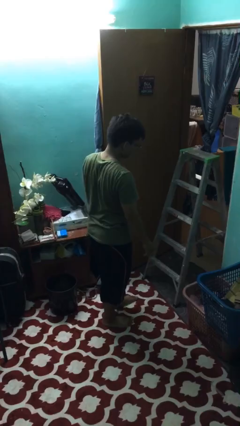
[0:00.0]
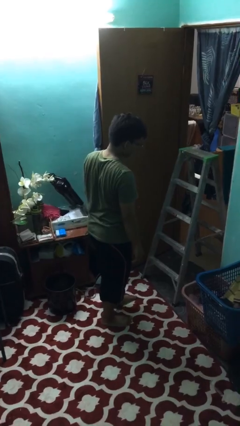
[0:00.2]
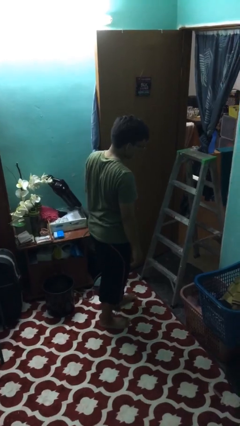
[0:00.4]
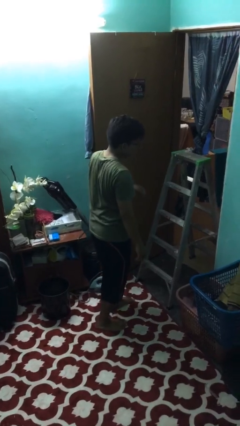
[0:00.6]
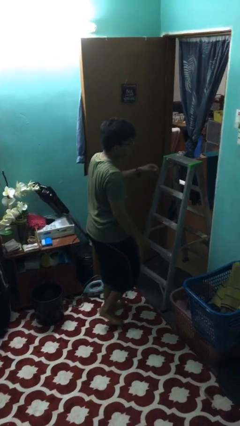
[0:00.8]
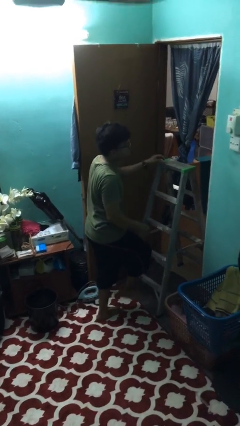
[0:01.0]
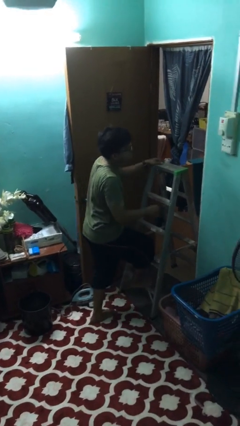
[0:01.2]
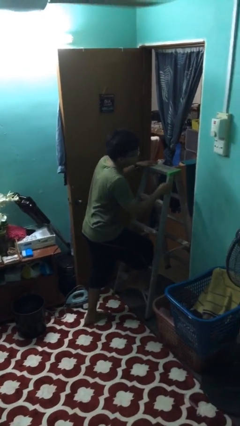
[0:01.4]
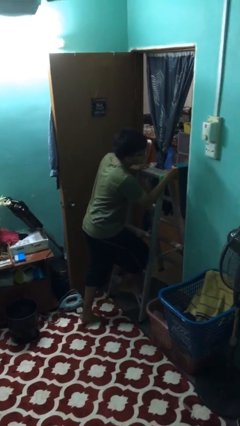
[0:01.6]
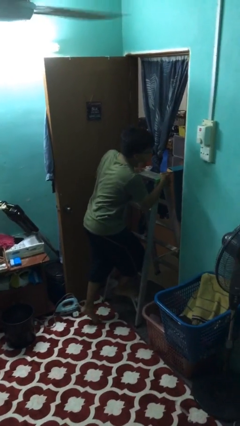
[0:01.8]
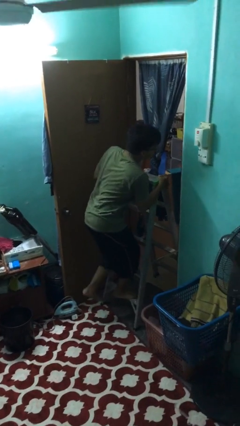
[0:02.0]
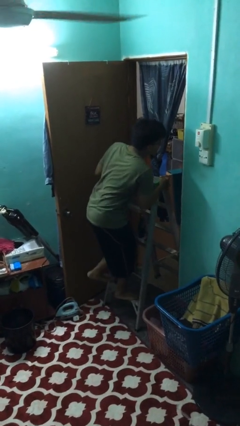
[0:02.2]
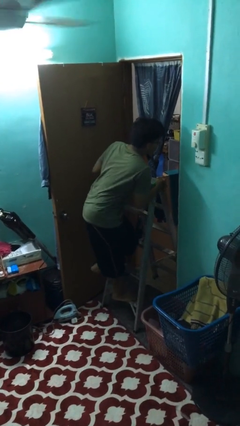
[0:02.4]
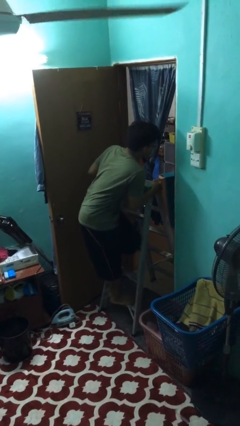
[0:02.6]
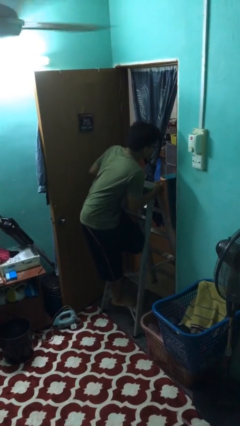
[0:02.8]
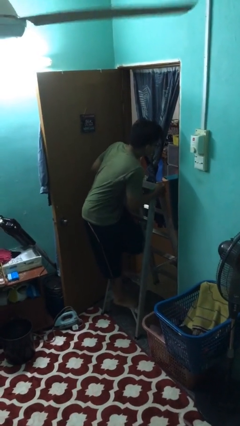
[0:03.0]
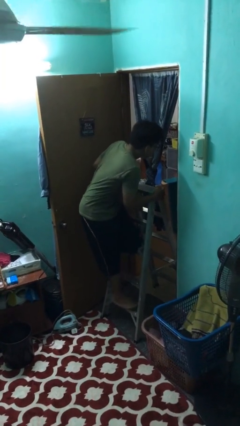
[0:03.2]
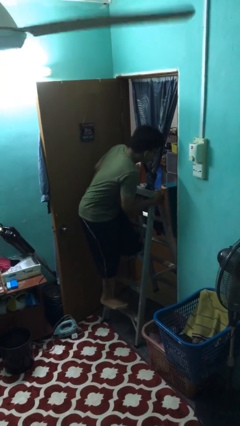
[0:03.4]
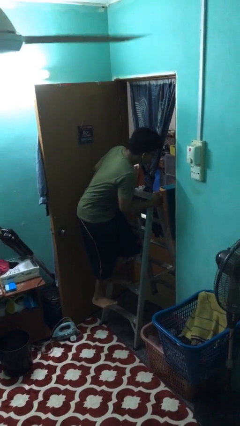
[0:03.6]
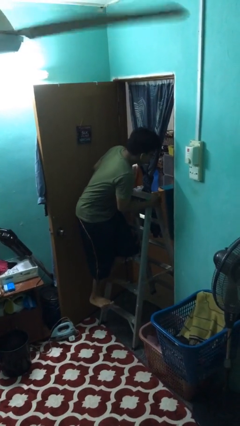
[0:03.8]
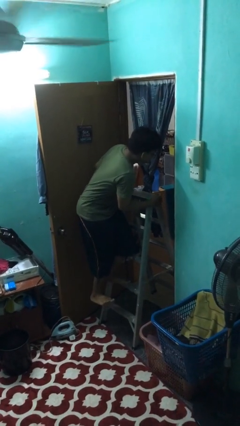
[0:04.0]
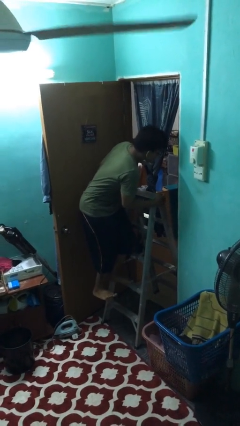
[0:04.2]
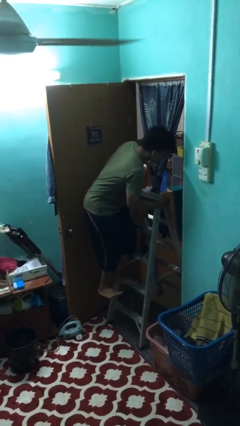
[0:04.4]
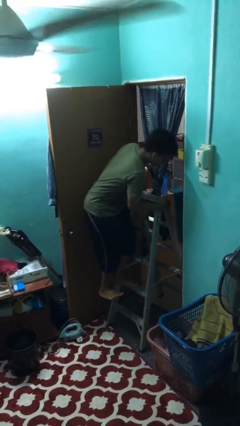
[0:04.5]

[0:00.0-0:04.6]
person climbs up ladder

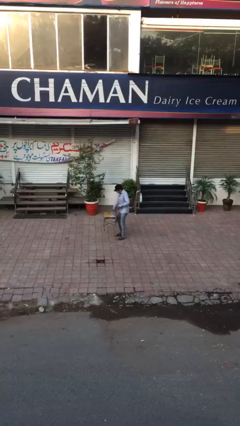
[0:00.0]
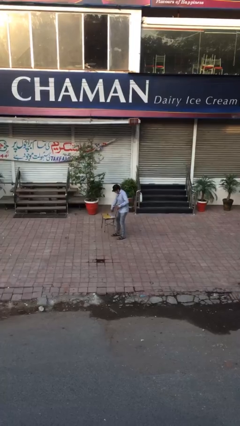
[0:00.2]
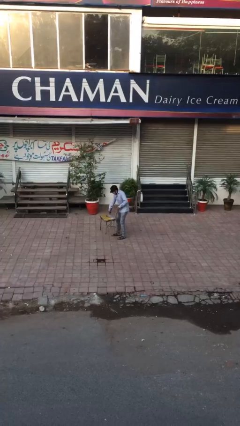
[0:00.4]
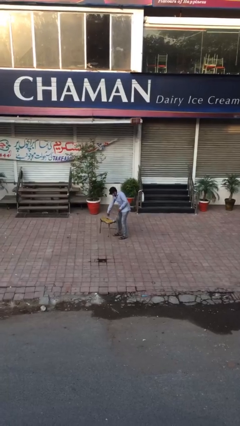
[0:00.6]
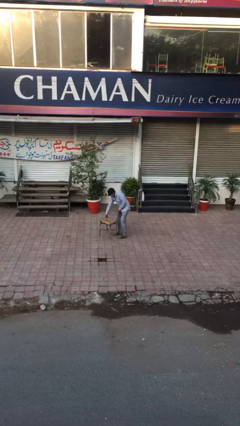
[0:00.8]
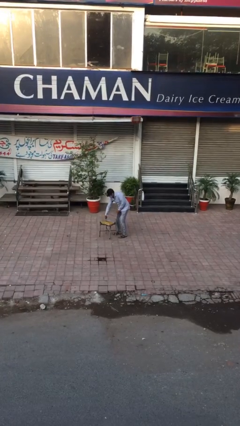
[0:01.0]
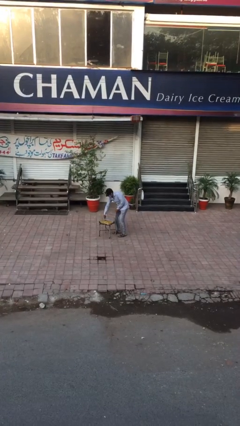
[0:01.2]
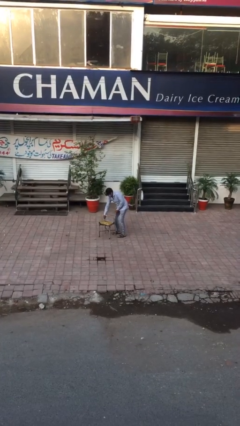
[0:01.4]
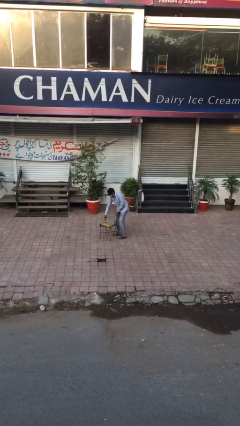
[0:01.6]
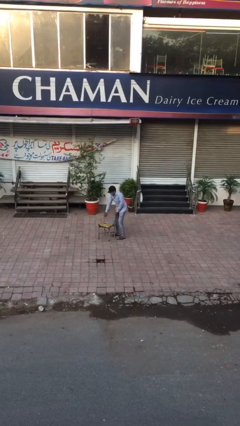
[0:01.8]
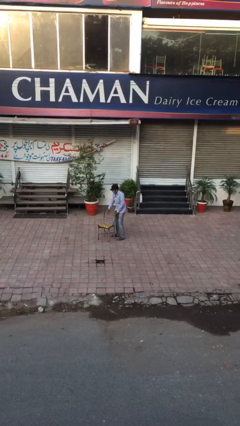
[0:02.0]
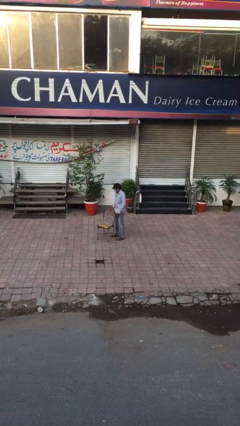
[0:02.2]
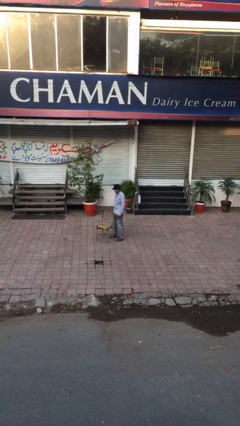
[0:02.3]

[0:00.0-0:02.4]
person puts down object on floor

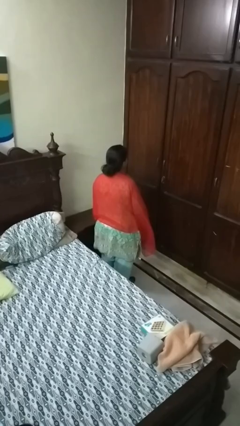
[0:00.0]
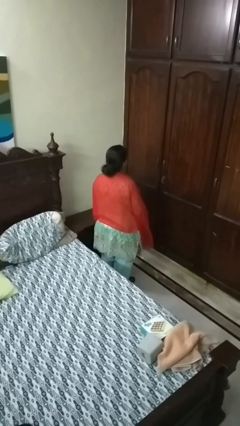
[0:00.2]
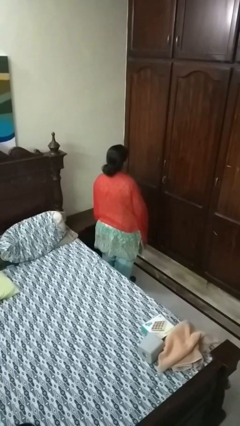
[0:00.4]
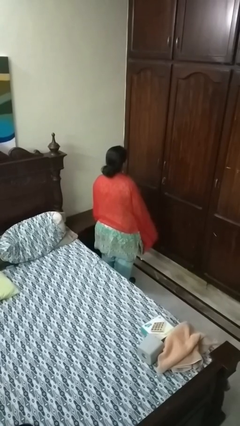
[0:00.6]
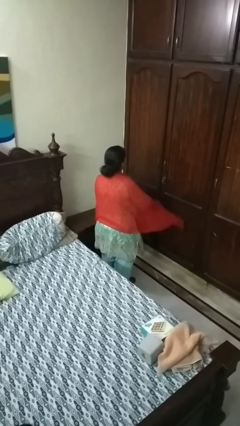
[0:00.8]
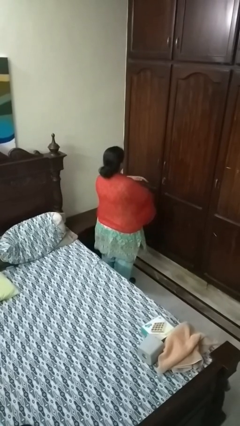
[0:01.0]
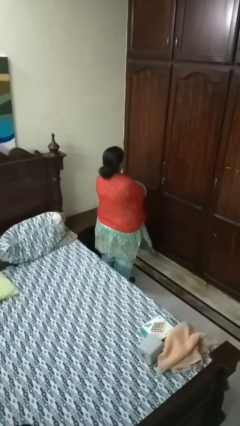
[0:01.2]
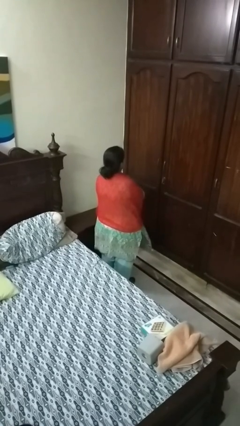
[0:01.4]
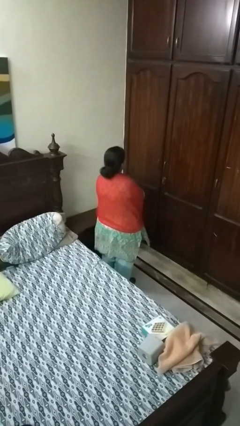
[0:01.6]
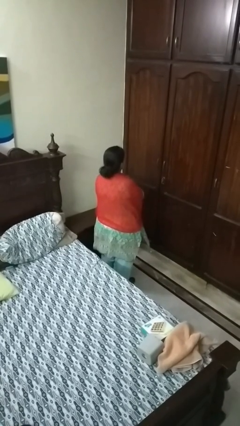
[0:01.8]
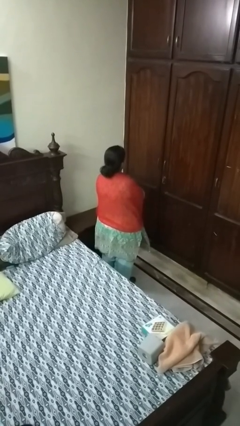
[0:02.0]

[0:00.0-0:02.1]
person crosses arms

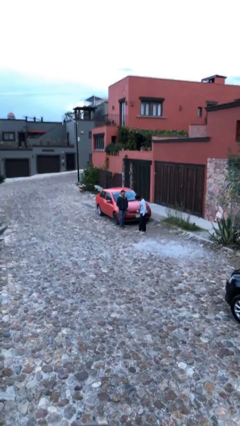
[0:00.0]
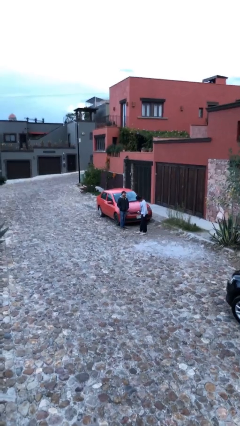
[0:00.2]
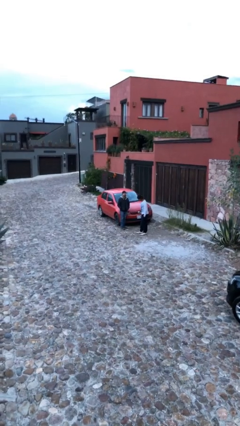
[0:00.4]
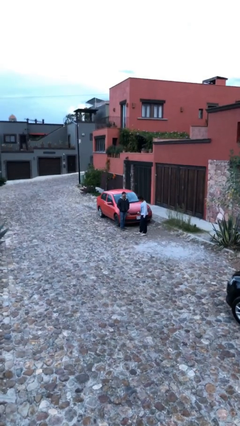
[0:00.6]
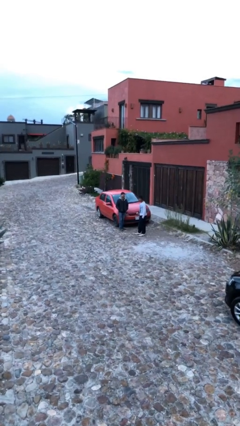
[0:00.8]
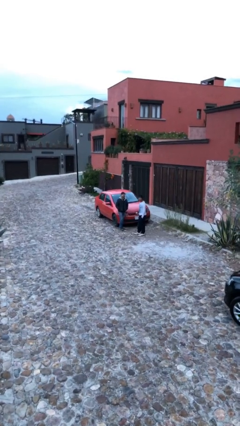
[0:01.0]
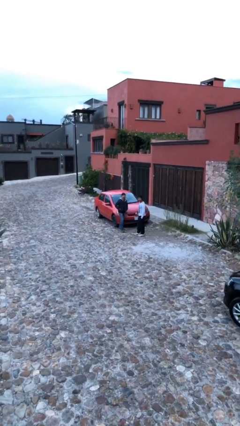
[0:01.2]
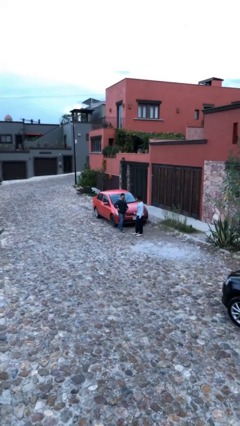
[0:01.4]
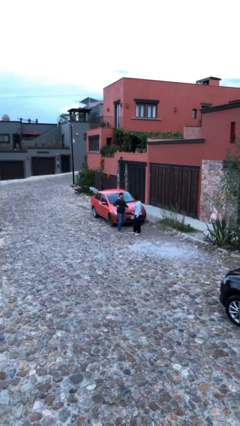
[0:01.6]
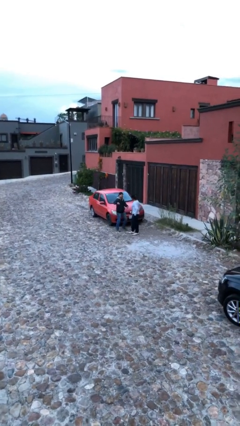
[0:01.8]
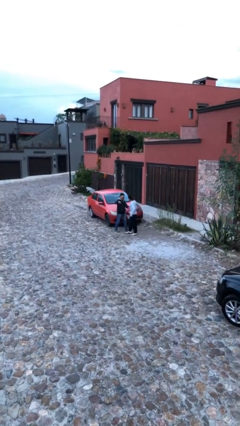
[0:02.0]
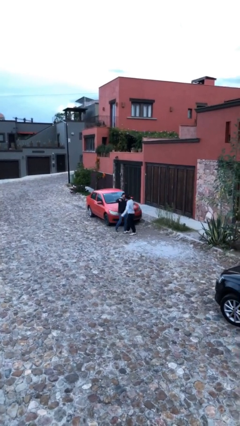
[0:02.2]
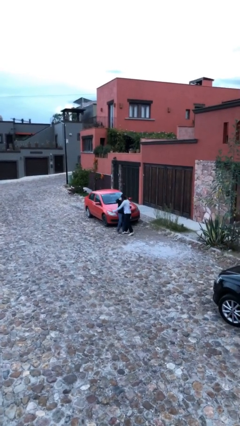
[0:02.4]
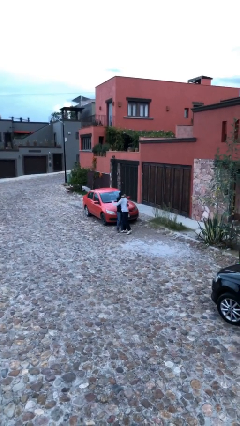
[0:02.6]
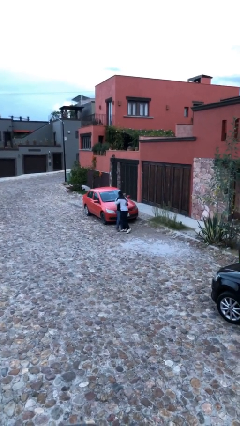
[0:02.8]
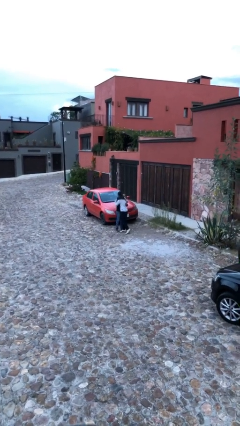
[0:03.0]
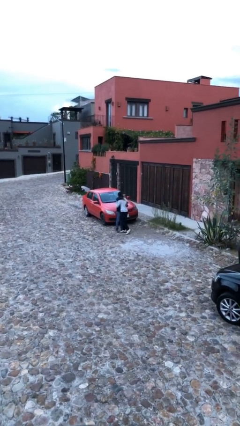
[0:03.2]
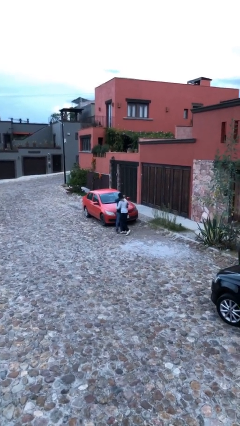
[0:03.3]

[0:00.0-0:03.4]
person embraces person

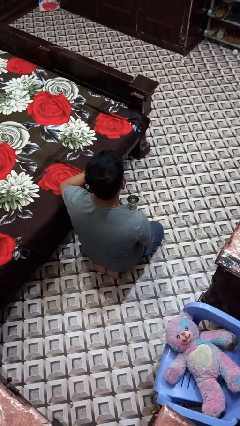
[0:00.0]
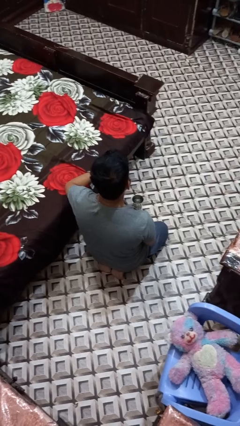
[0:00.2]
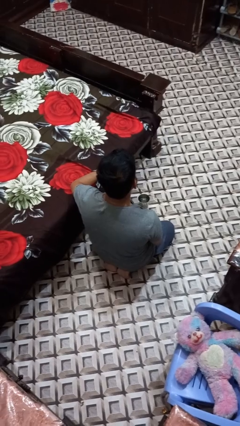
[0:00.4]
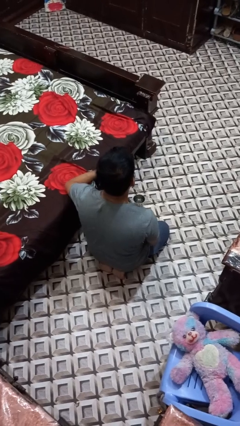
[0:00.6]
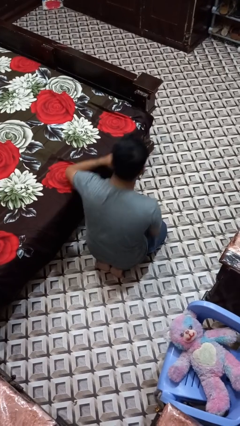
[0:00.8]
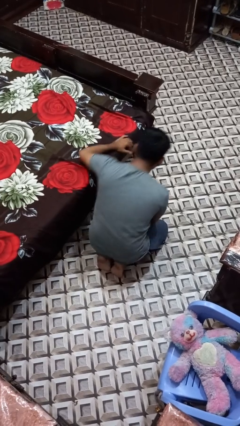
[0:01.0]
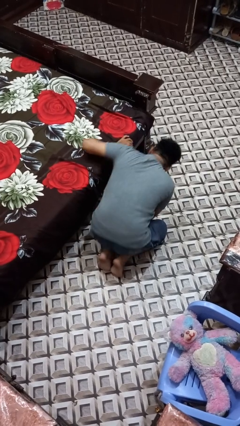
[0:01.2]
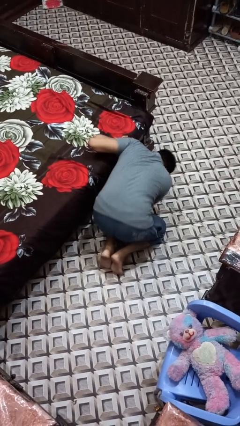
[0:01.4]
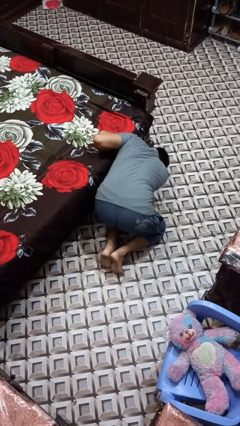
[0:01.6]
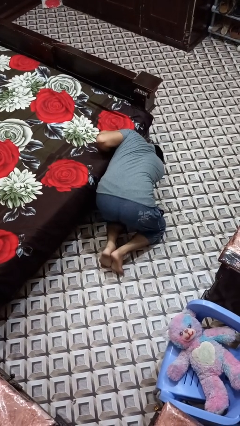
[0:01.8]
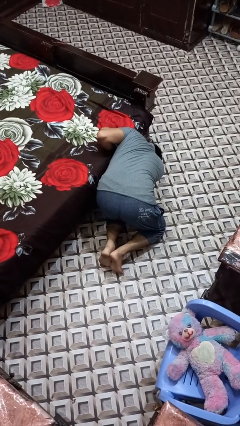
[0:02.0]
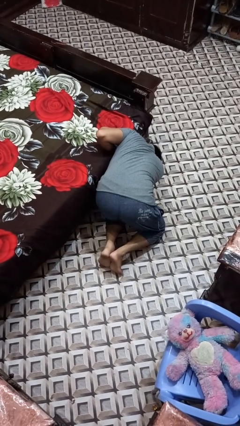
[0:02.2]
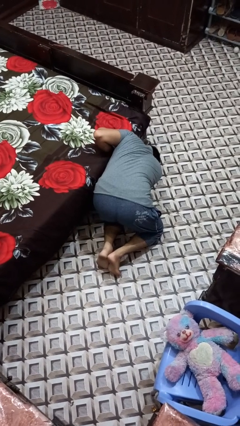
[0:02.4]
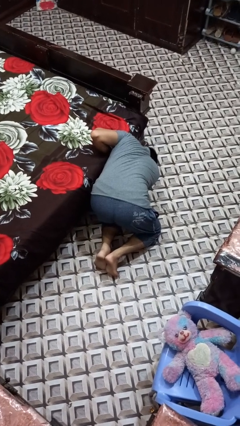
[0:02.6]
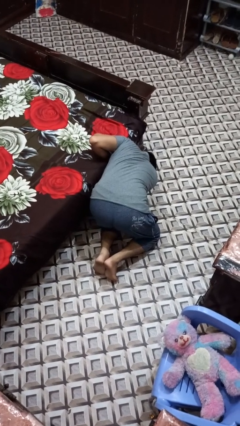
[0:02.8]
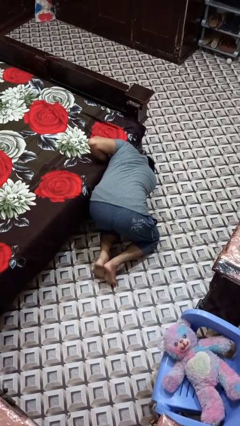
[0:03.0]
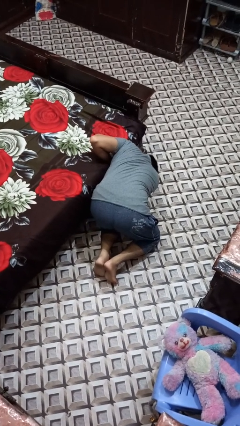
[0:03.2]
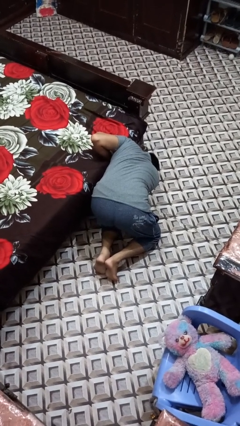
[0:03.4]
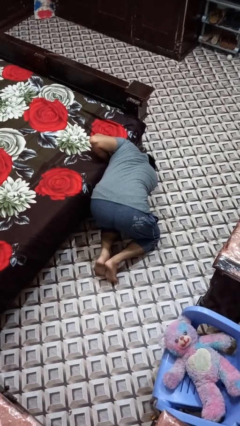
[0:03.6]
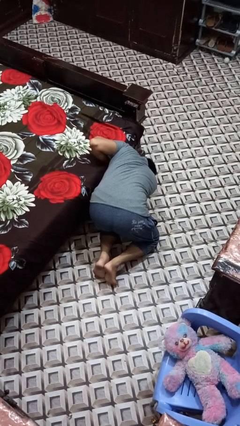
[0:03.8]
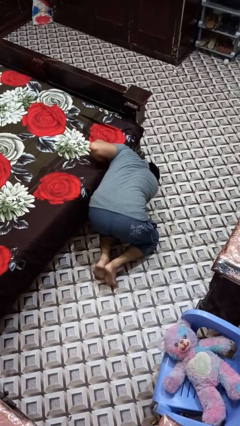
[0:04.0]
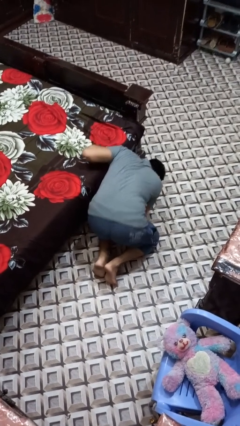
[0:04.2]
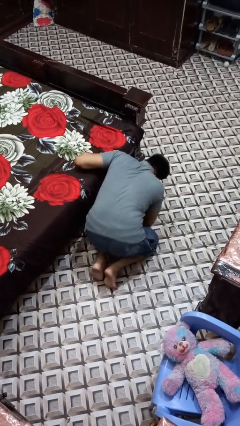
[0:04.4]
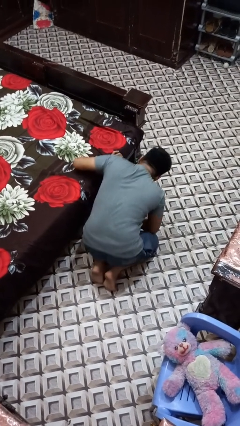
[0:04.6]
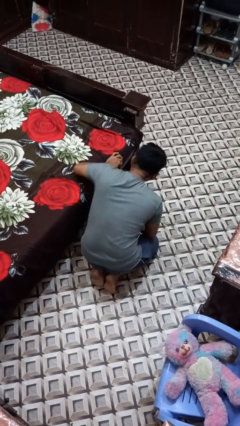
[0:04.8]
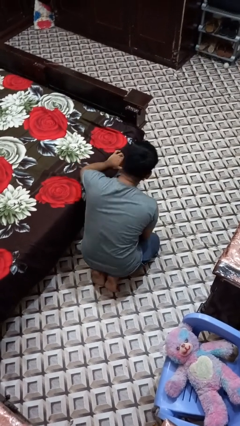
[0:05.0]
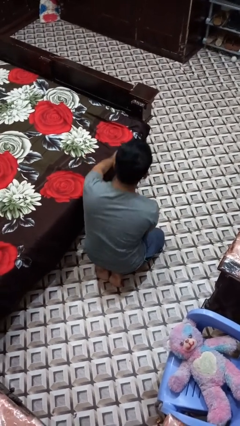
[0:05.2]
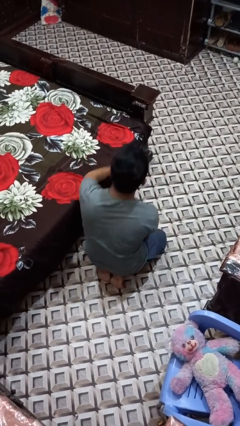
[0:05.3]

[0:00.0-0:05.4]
person searches under bed
